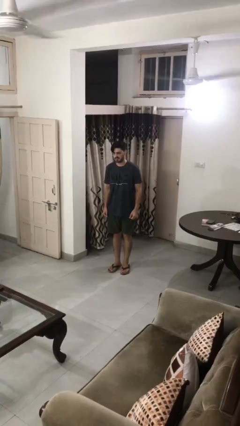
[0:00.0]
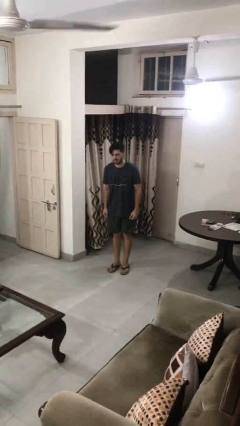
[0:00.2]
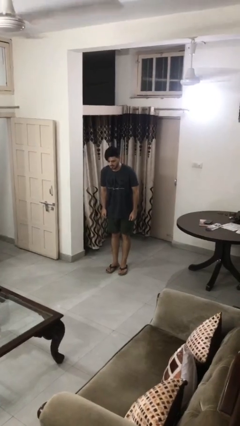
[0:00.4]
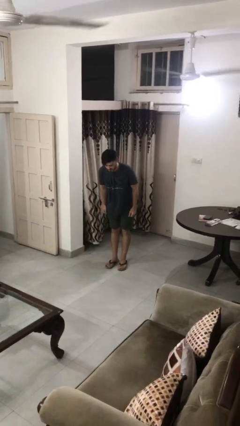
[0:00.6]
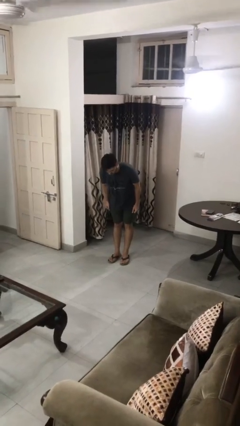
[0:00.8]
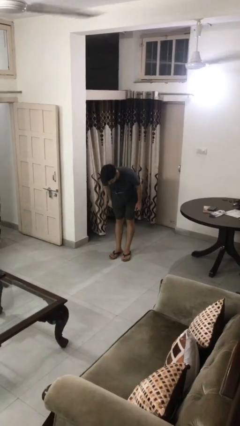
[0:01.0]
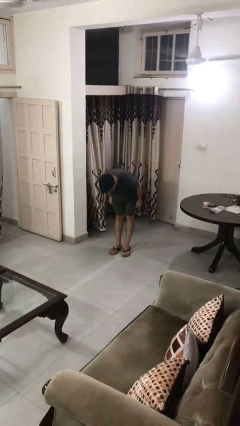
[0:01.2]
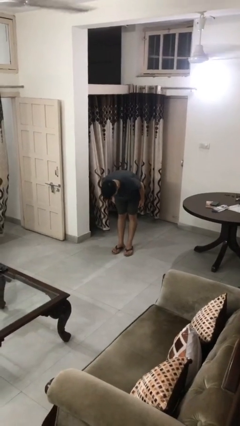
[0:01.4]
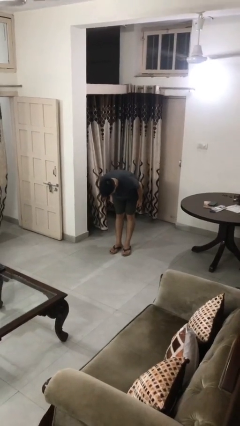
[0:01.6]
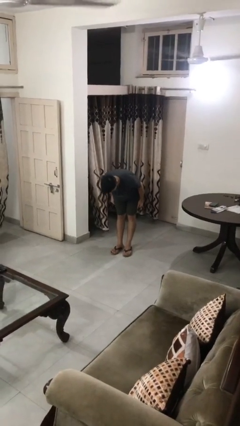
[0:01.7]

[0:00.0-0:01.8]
person bows

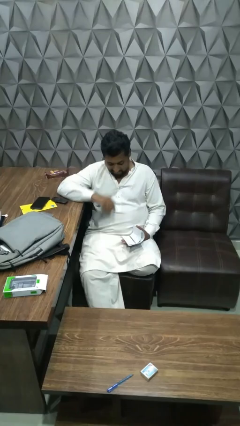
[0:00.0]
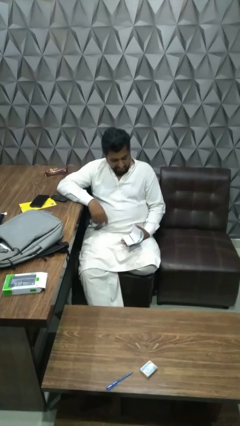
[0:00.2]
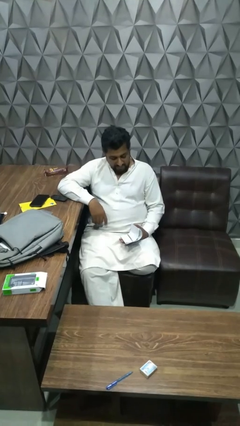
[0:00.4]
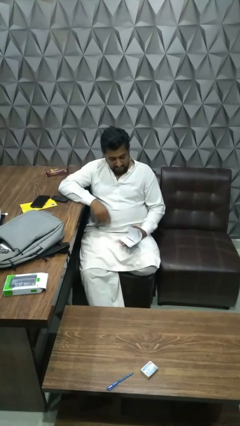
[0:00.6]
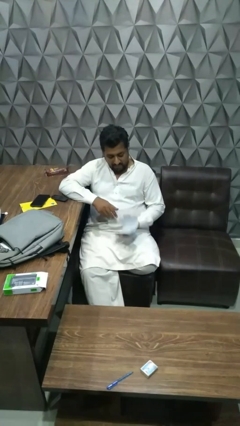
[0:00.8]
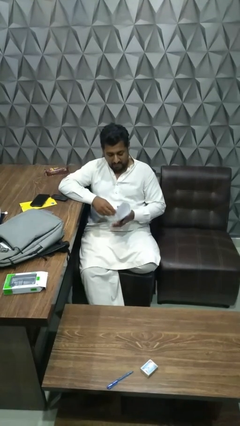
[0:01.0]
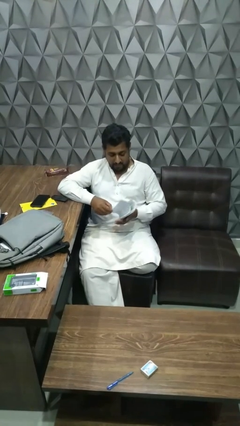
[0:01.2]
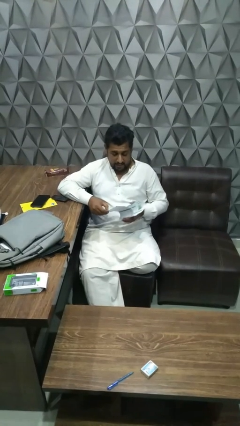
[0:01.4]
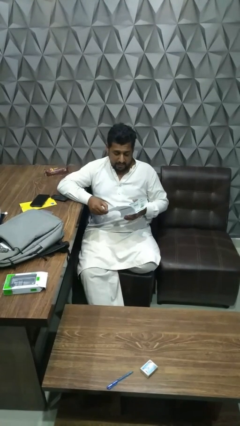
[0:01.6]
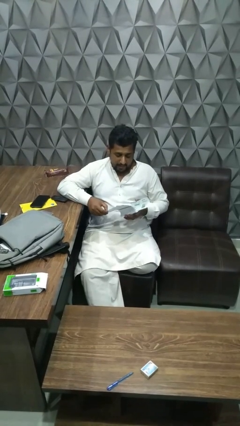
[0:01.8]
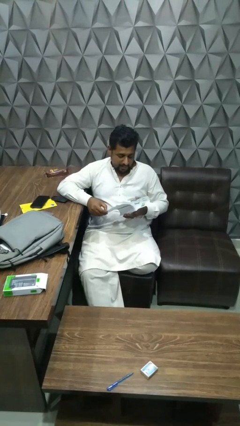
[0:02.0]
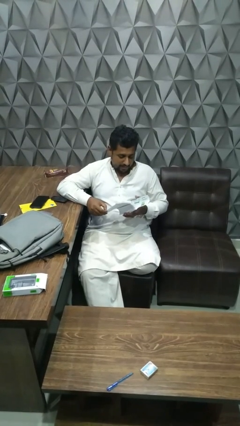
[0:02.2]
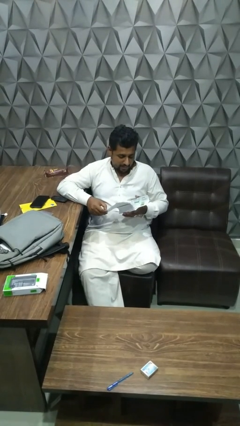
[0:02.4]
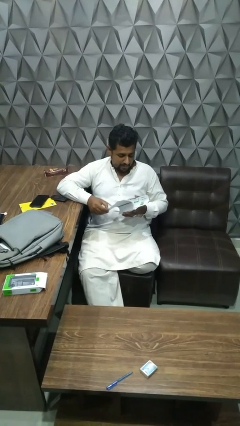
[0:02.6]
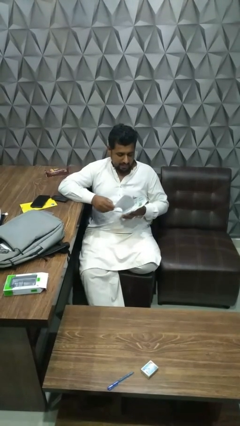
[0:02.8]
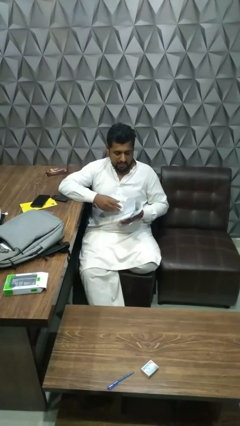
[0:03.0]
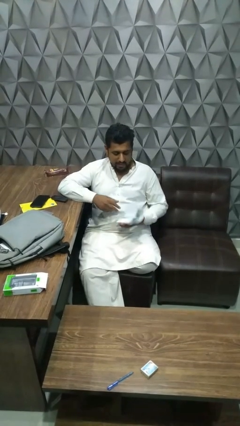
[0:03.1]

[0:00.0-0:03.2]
person reads magazine

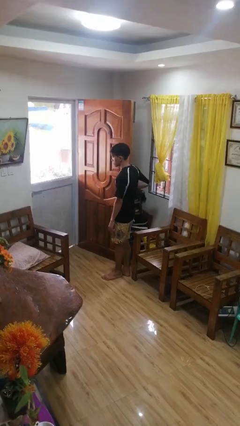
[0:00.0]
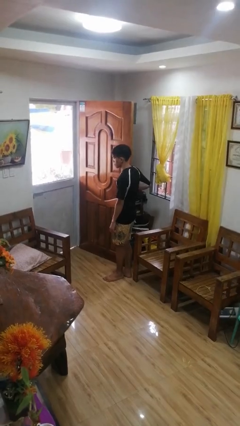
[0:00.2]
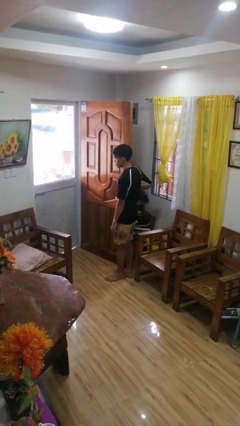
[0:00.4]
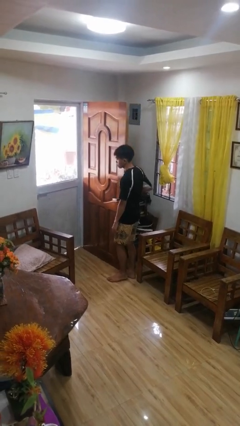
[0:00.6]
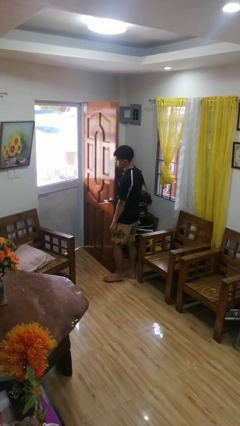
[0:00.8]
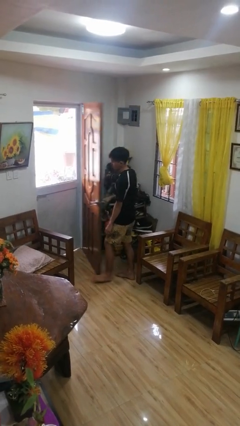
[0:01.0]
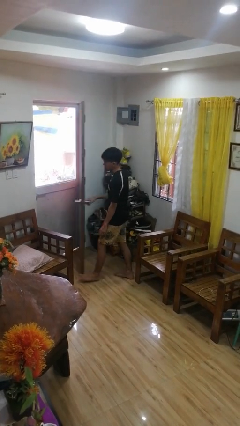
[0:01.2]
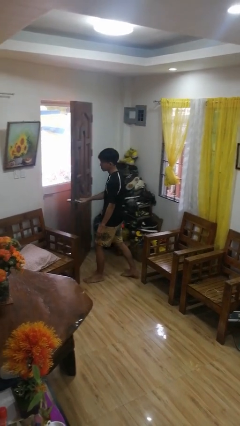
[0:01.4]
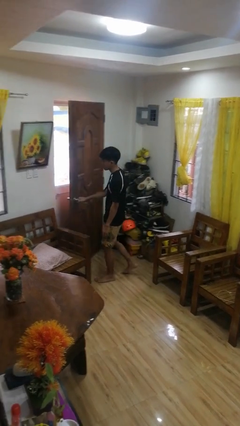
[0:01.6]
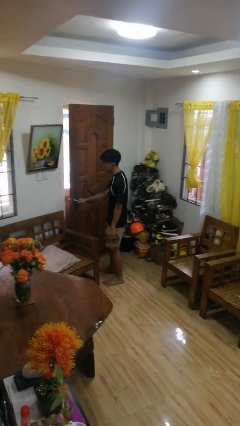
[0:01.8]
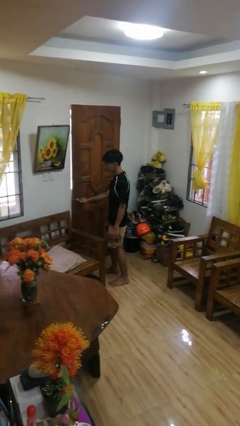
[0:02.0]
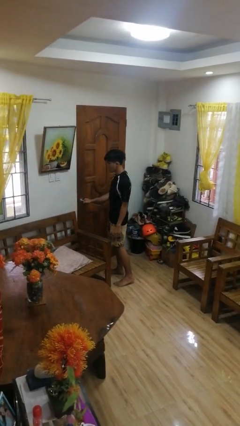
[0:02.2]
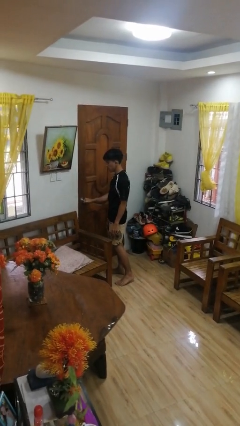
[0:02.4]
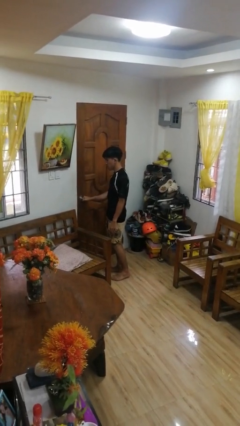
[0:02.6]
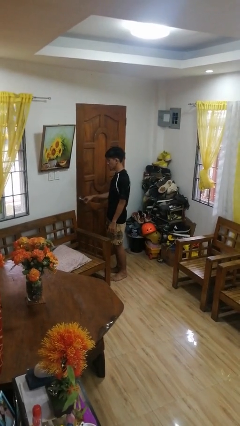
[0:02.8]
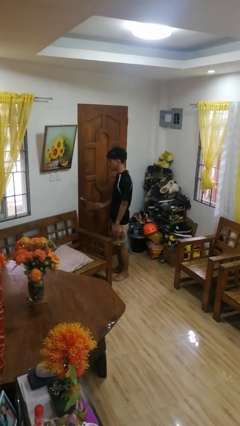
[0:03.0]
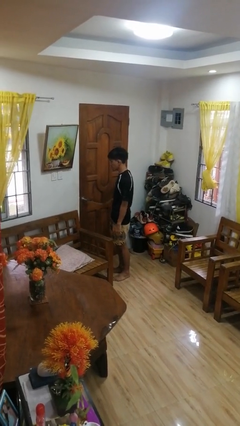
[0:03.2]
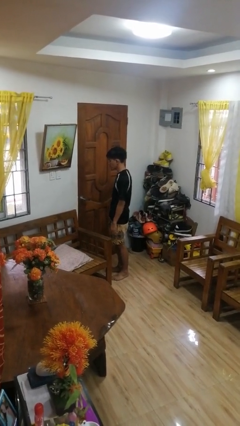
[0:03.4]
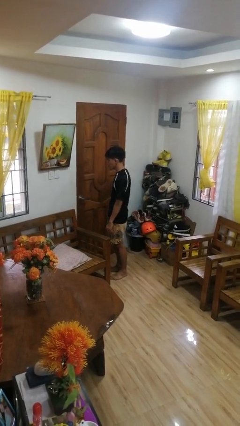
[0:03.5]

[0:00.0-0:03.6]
person closes facility door

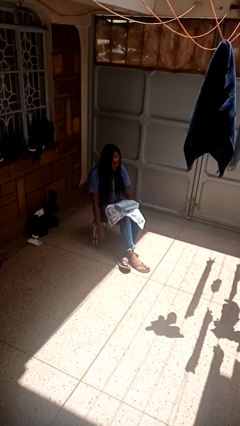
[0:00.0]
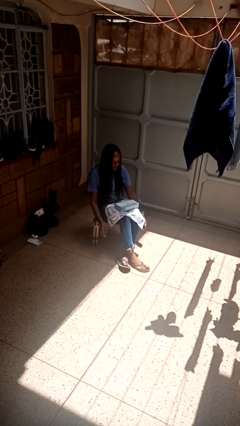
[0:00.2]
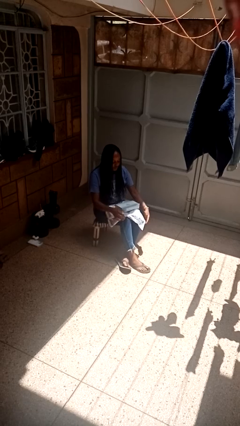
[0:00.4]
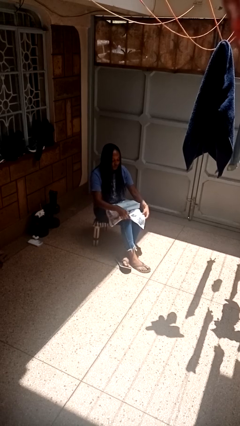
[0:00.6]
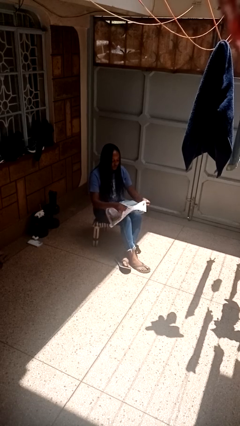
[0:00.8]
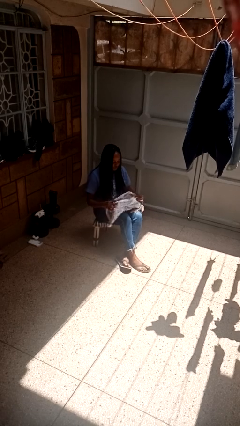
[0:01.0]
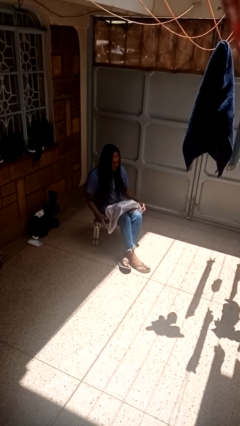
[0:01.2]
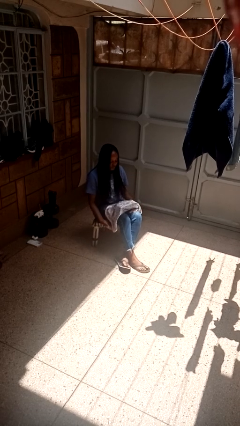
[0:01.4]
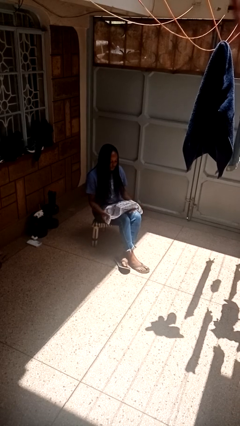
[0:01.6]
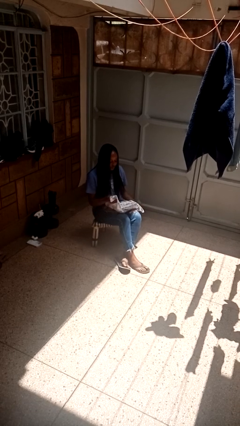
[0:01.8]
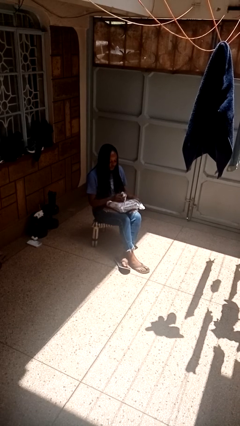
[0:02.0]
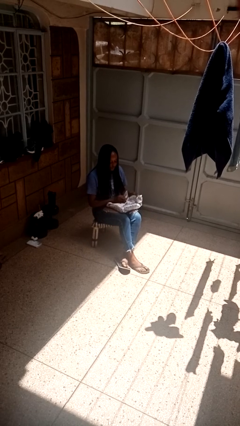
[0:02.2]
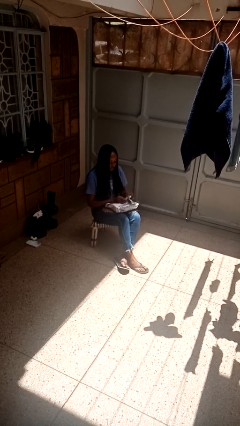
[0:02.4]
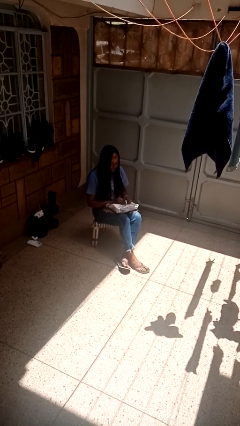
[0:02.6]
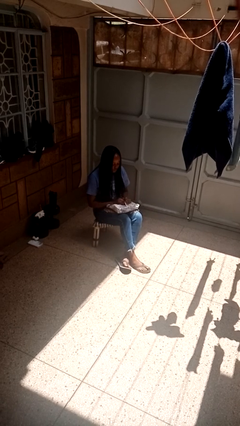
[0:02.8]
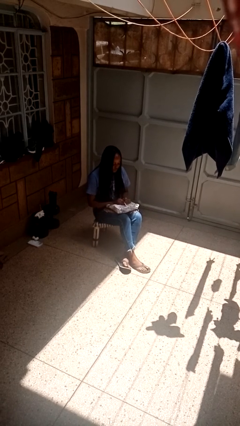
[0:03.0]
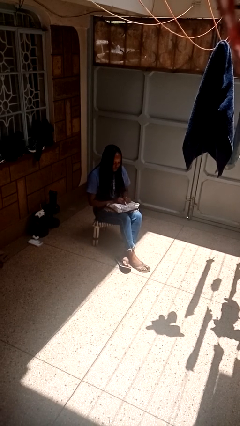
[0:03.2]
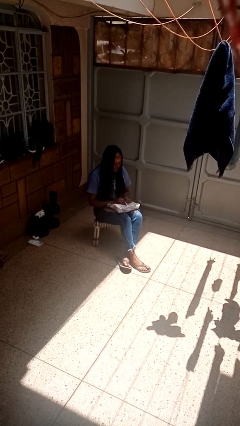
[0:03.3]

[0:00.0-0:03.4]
person wraps box

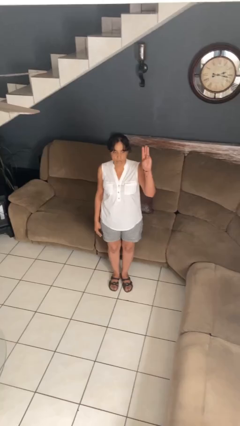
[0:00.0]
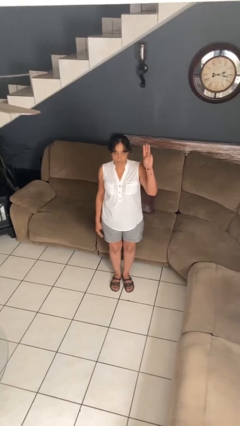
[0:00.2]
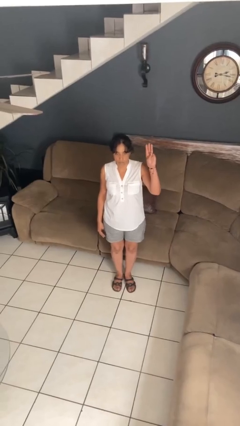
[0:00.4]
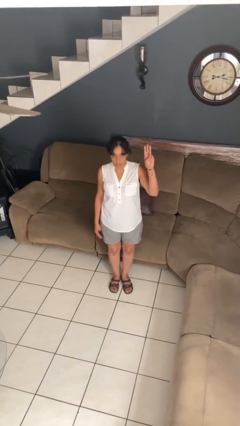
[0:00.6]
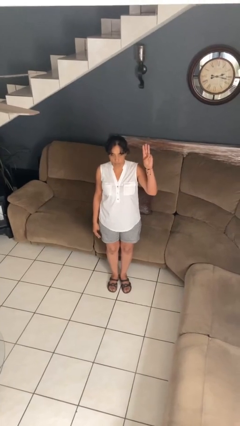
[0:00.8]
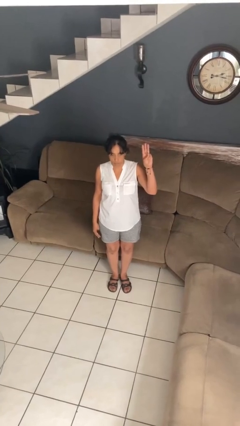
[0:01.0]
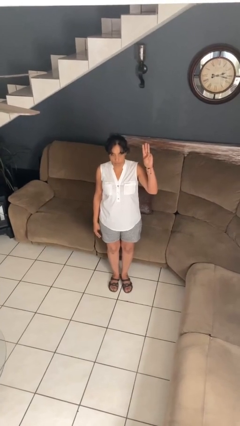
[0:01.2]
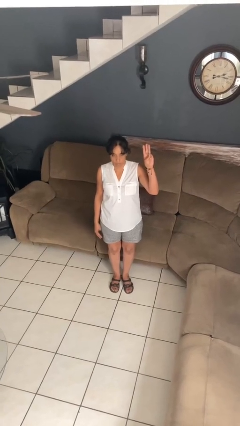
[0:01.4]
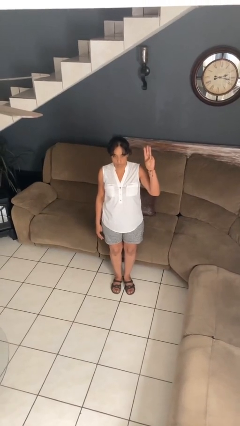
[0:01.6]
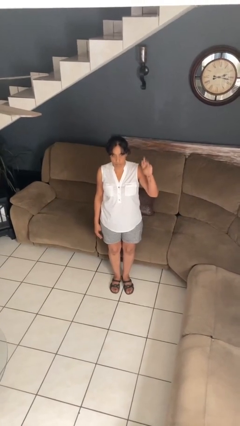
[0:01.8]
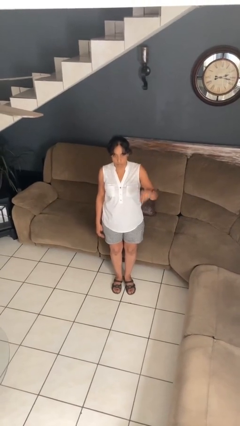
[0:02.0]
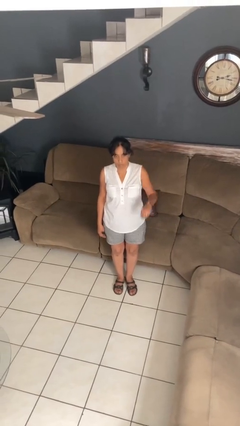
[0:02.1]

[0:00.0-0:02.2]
person gestures number three

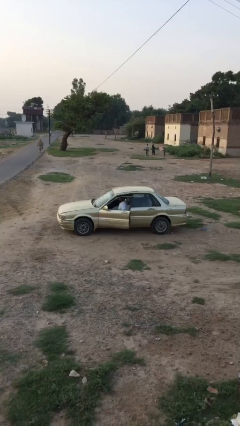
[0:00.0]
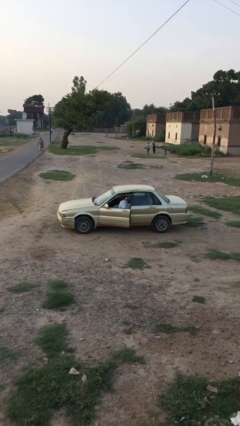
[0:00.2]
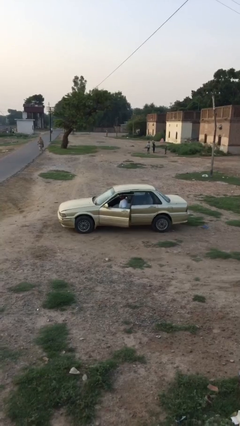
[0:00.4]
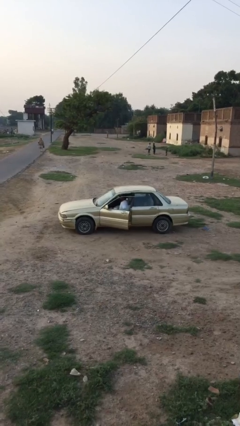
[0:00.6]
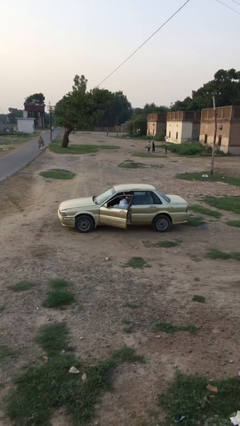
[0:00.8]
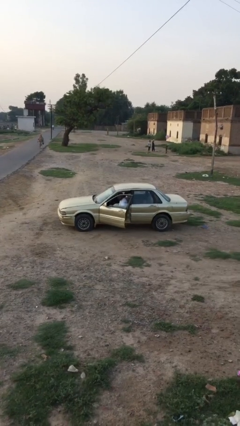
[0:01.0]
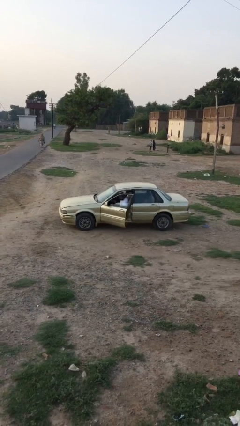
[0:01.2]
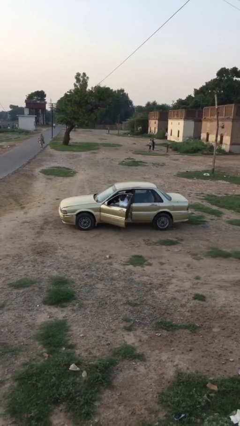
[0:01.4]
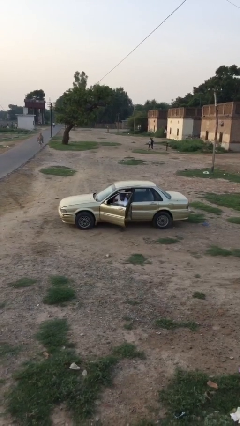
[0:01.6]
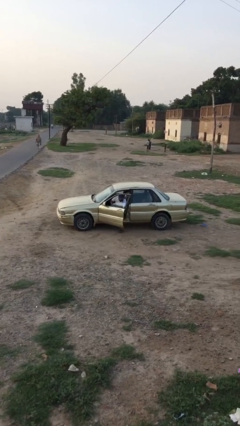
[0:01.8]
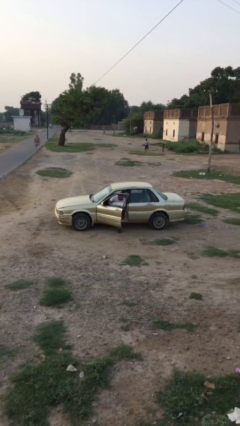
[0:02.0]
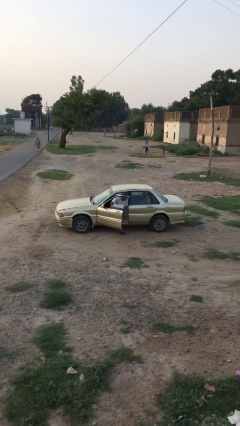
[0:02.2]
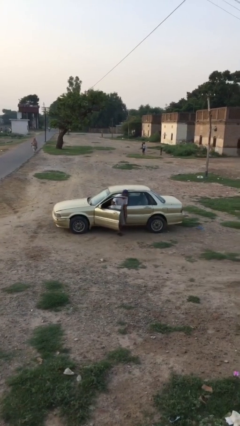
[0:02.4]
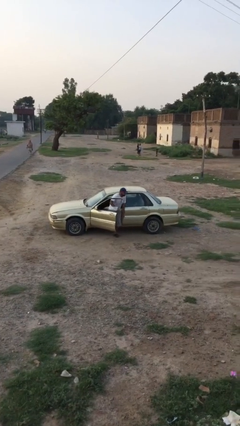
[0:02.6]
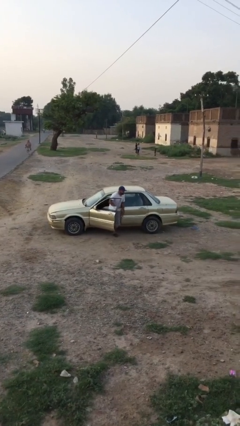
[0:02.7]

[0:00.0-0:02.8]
person exits car
